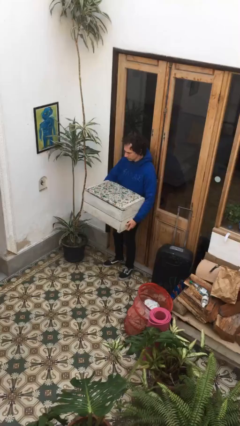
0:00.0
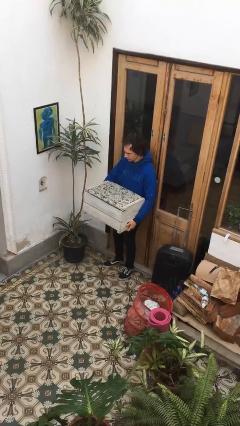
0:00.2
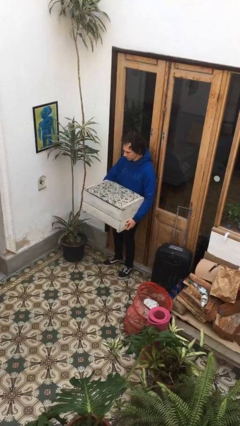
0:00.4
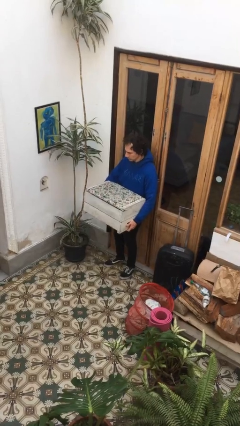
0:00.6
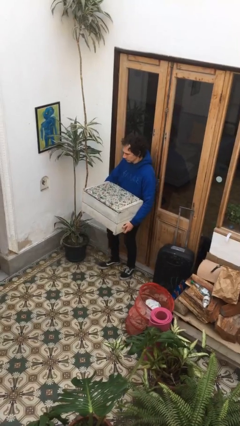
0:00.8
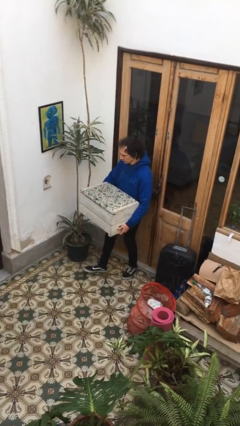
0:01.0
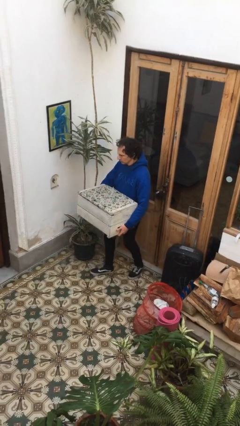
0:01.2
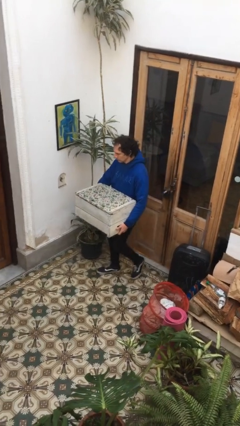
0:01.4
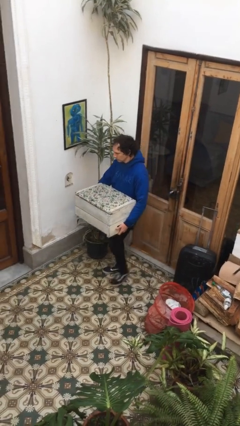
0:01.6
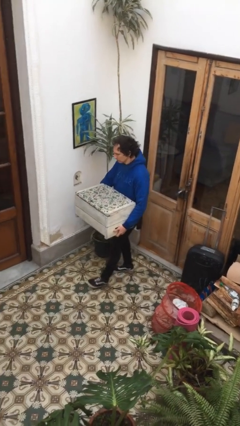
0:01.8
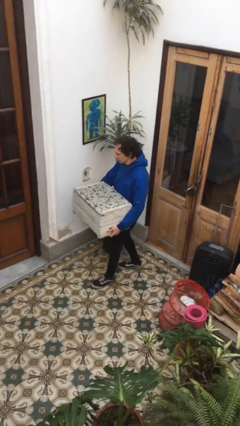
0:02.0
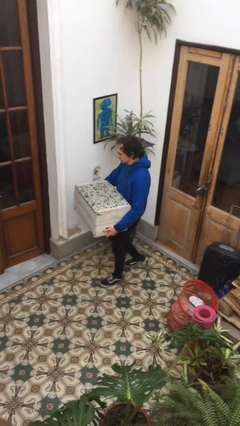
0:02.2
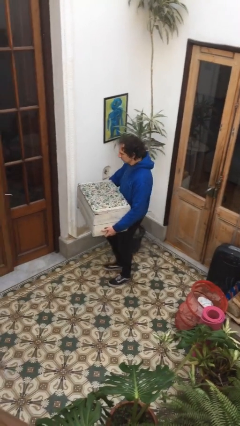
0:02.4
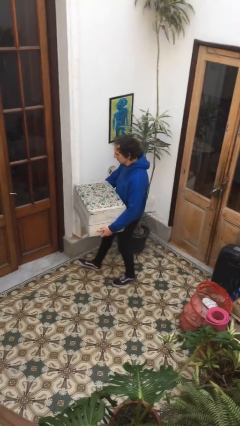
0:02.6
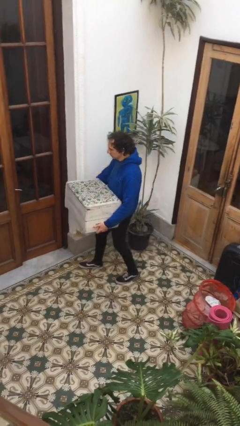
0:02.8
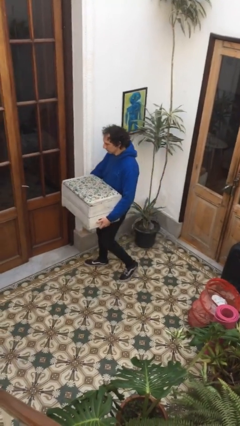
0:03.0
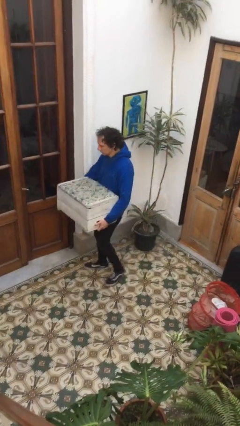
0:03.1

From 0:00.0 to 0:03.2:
person carries furniture

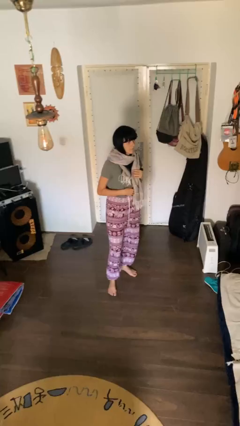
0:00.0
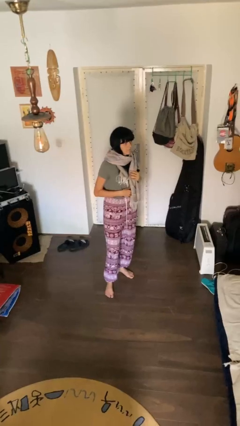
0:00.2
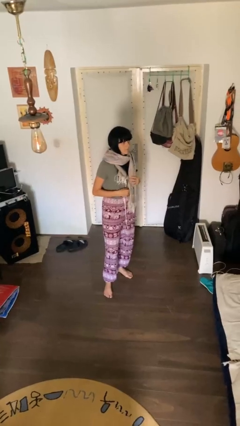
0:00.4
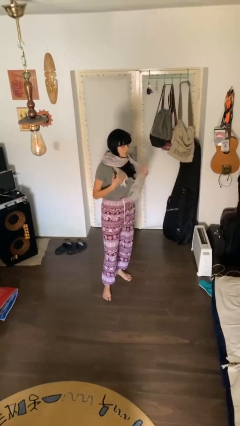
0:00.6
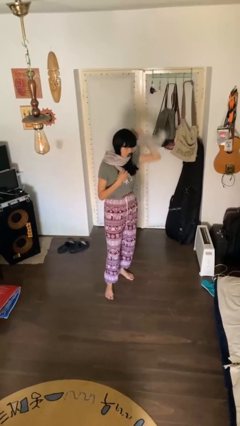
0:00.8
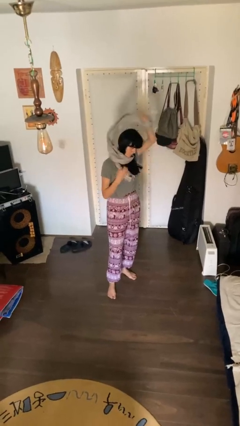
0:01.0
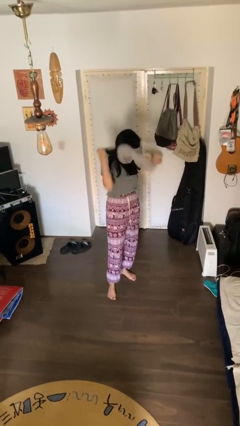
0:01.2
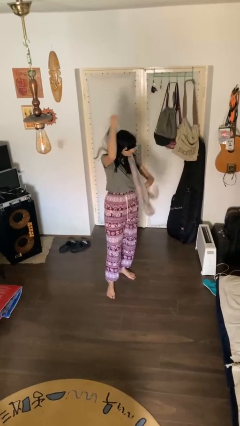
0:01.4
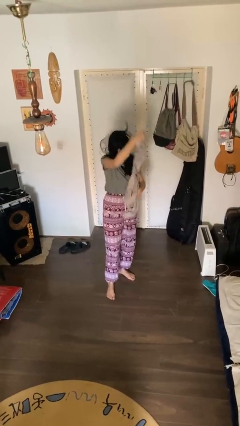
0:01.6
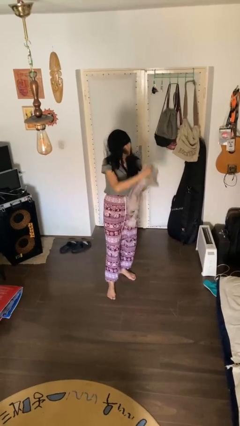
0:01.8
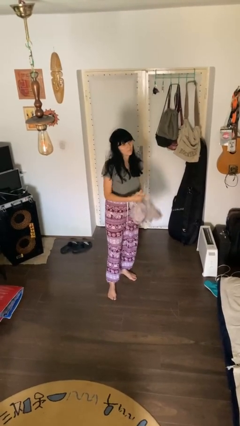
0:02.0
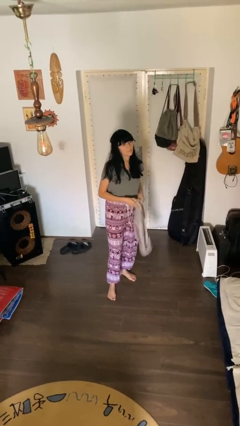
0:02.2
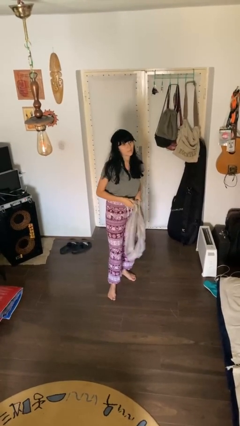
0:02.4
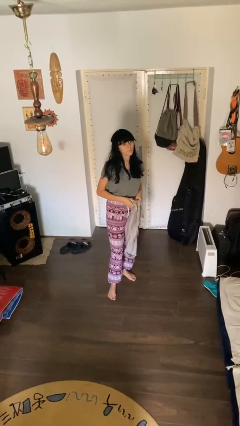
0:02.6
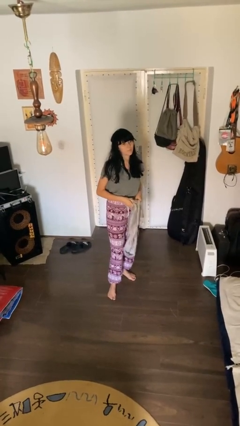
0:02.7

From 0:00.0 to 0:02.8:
person takes off scarf

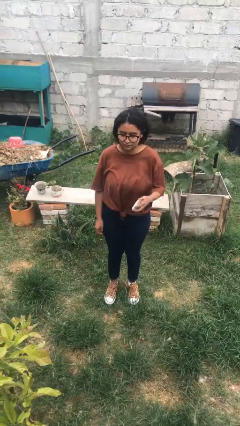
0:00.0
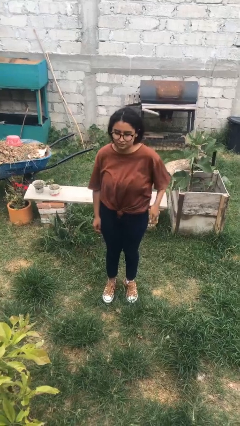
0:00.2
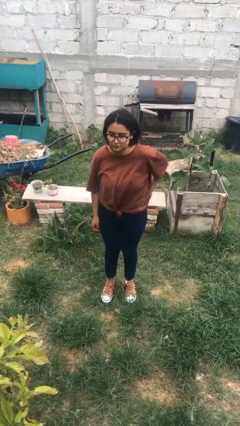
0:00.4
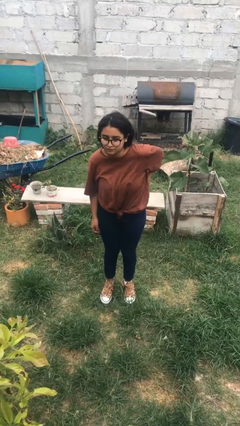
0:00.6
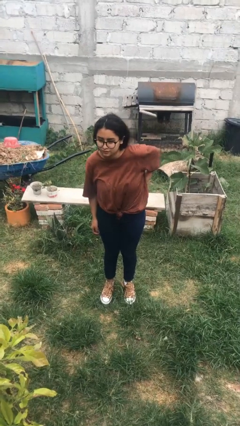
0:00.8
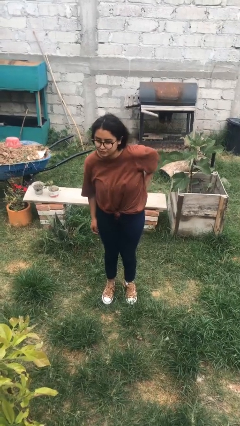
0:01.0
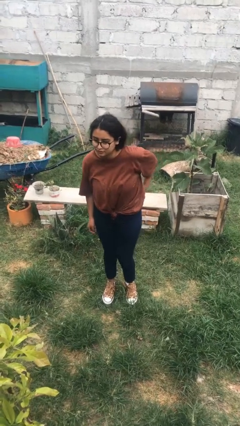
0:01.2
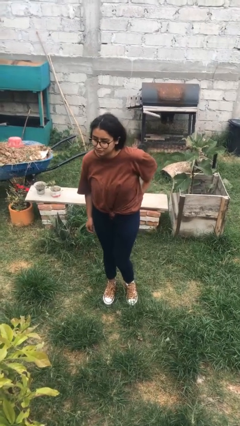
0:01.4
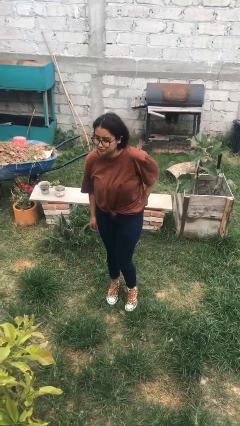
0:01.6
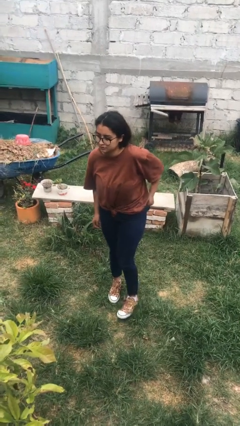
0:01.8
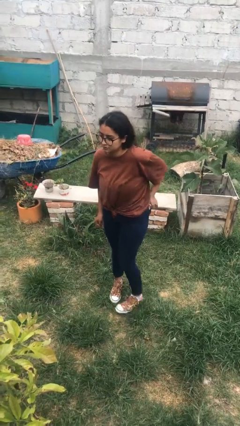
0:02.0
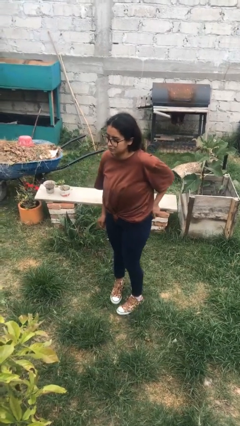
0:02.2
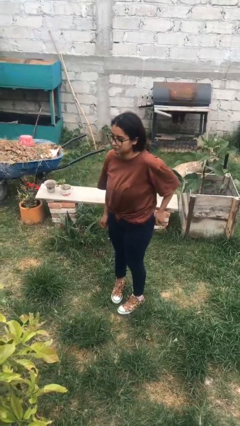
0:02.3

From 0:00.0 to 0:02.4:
person puts phone into pocket

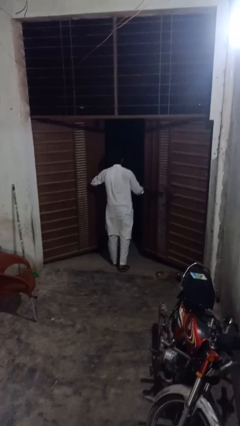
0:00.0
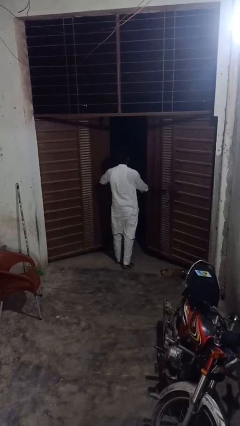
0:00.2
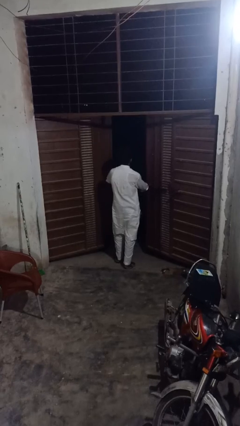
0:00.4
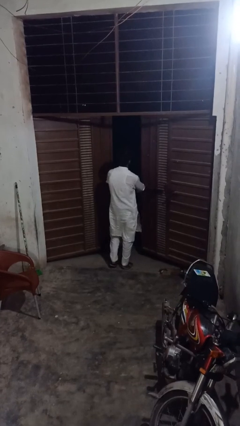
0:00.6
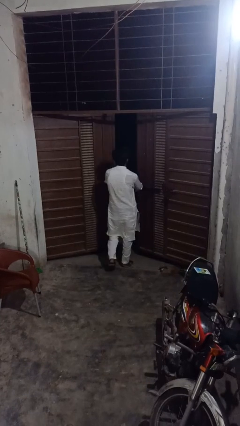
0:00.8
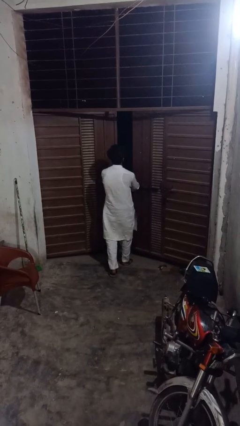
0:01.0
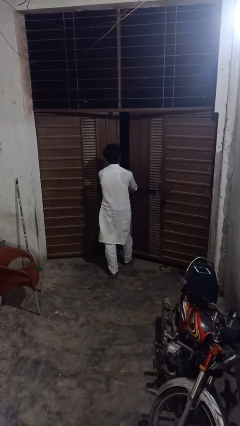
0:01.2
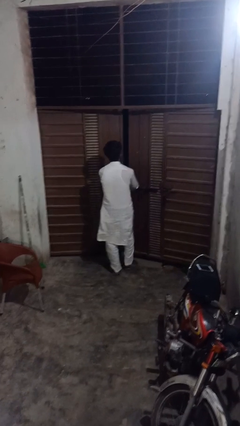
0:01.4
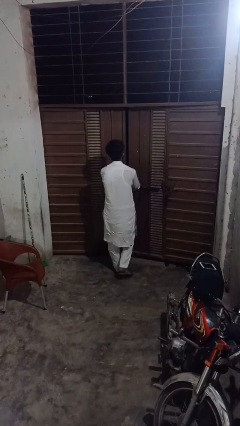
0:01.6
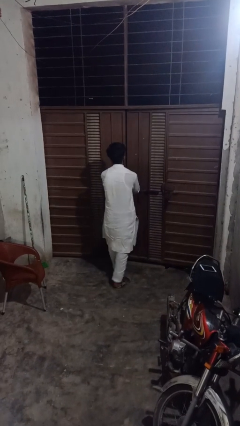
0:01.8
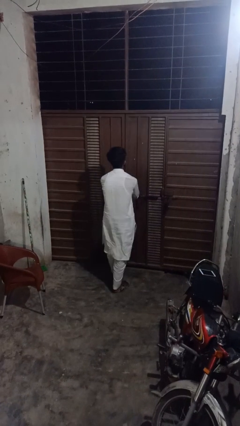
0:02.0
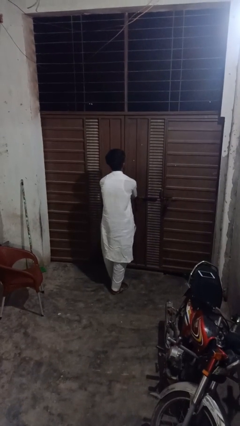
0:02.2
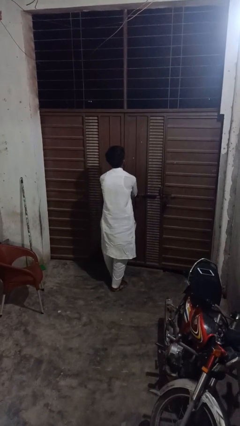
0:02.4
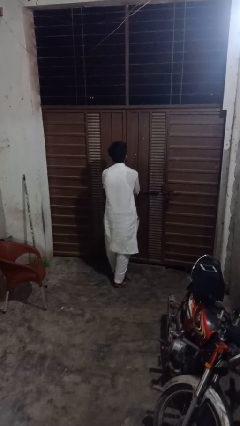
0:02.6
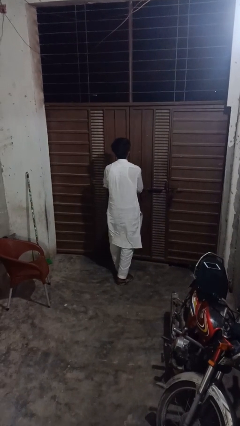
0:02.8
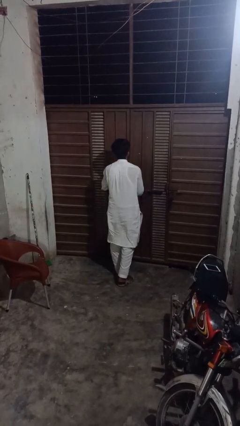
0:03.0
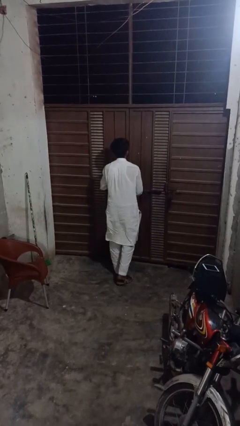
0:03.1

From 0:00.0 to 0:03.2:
person closes gate

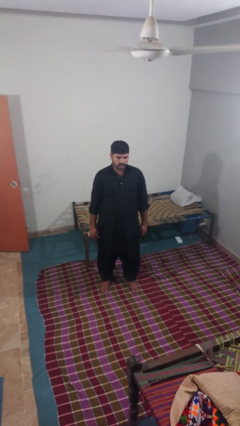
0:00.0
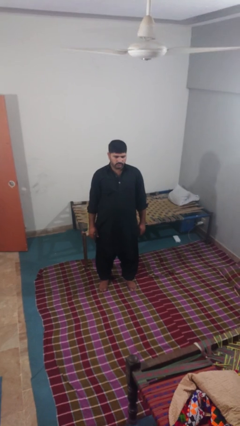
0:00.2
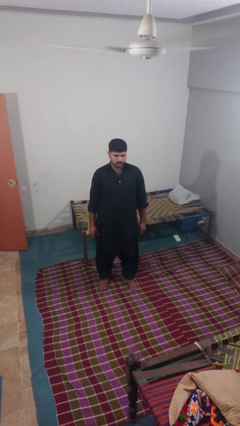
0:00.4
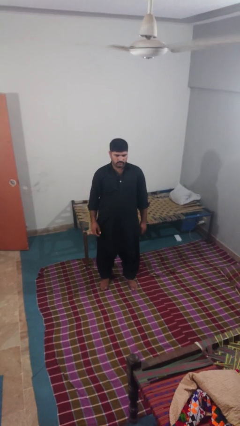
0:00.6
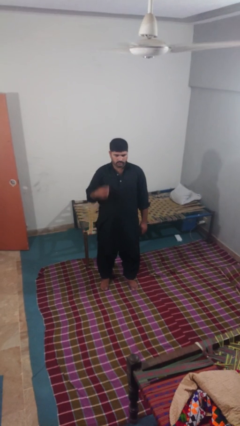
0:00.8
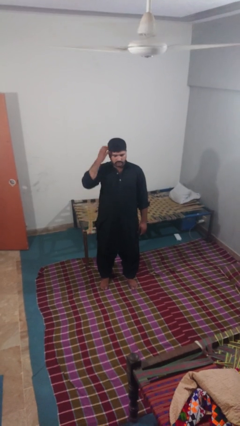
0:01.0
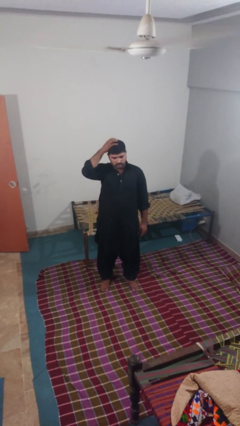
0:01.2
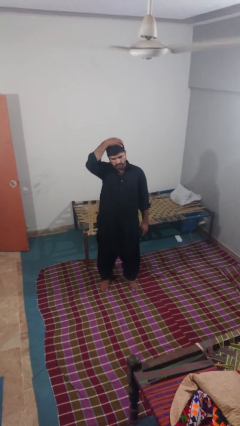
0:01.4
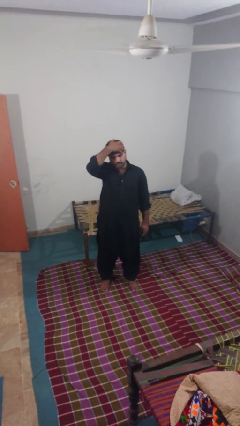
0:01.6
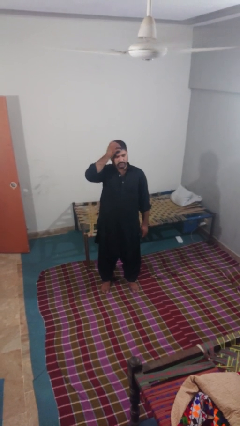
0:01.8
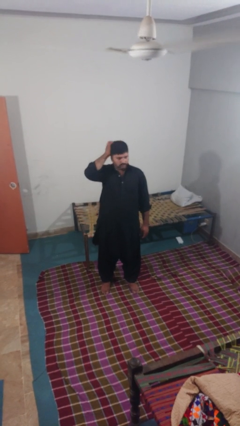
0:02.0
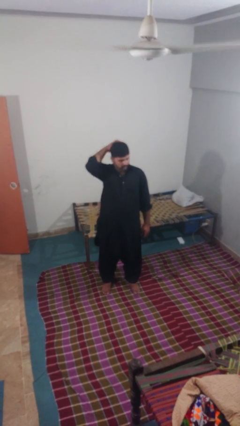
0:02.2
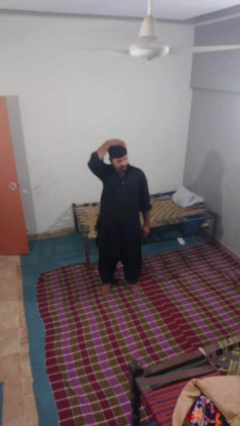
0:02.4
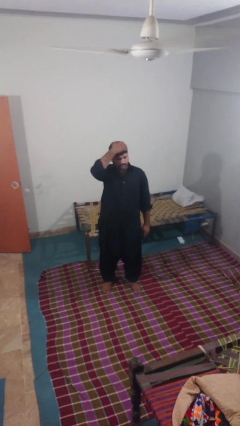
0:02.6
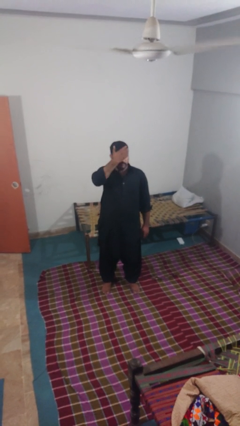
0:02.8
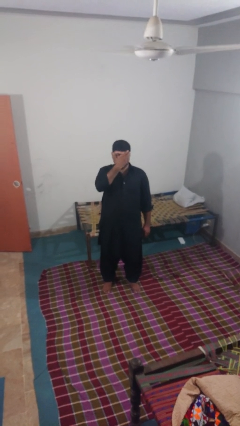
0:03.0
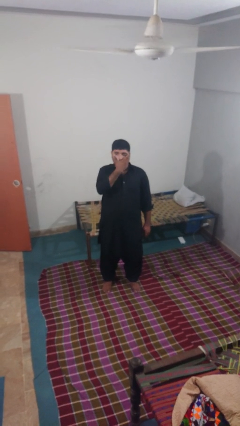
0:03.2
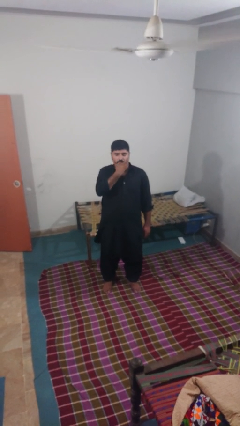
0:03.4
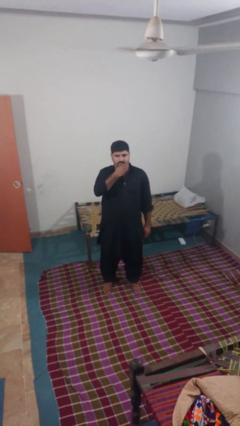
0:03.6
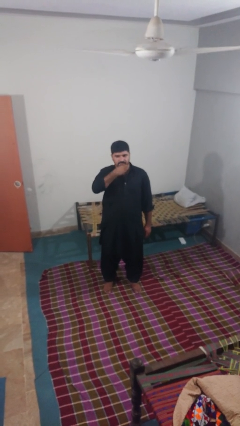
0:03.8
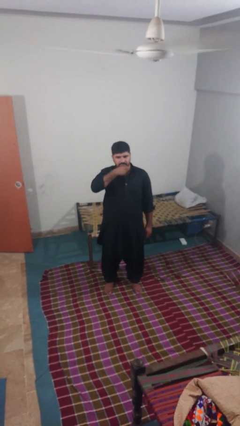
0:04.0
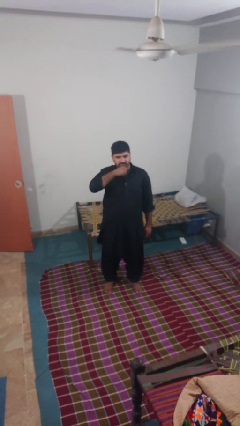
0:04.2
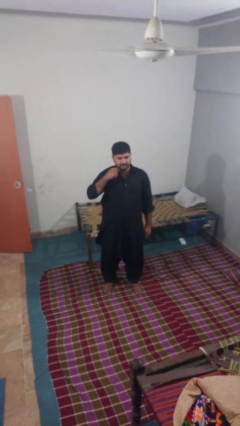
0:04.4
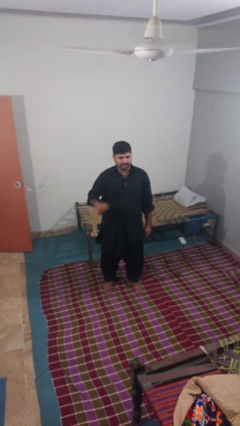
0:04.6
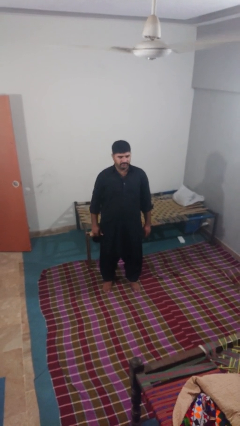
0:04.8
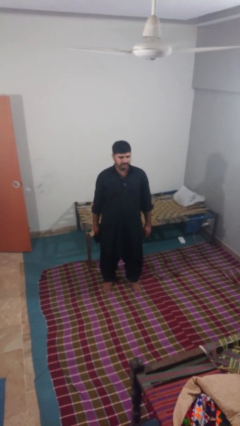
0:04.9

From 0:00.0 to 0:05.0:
person scratches face

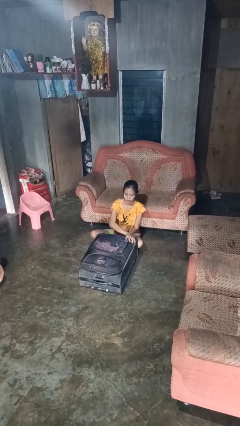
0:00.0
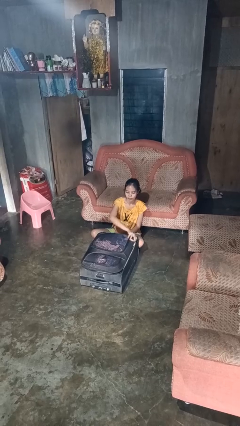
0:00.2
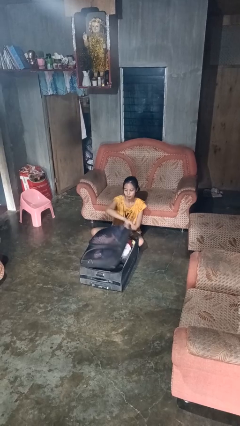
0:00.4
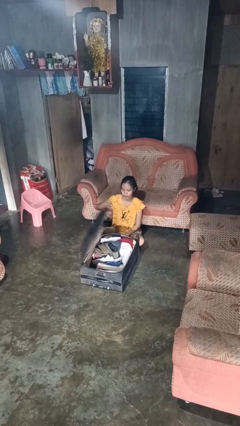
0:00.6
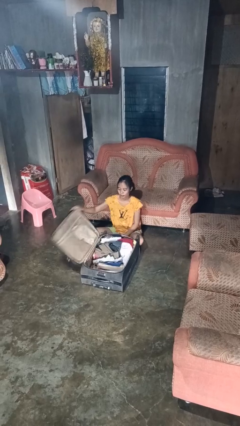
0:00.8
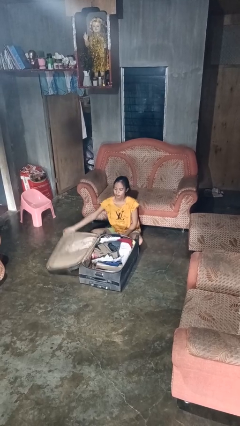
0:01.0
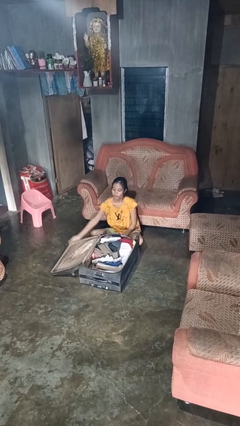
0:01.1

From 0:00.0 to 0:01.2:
person opens suitcase
